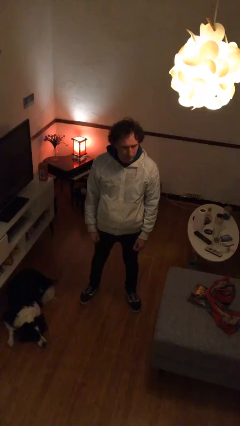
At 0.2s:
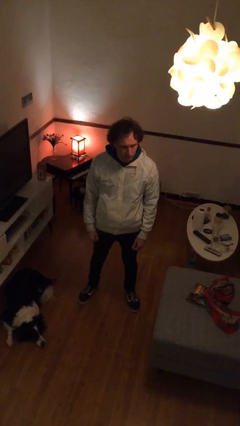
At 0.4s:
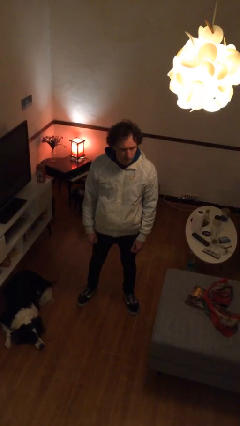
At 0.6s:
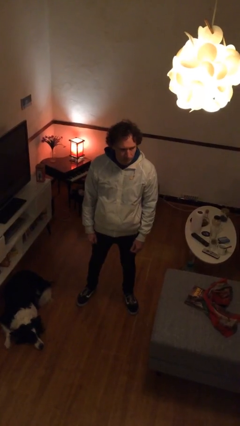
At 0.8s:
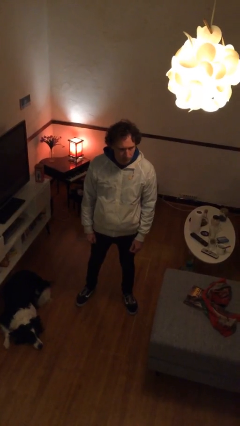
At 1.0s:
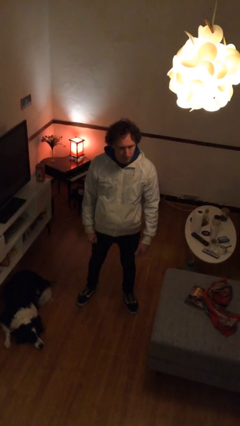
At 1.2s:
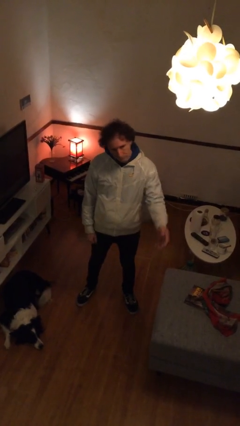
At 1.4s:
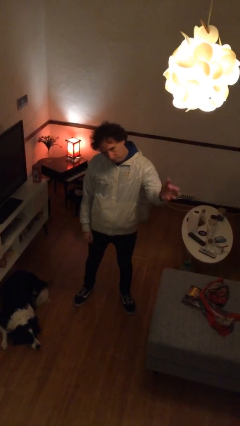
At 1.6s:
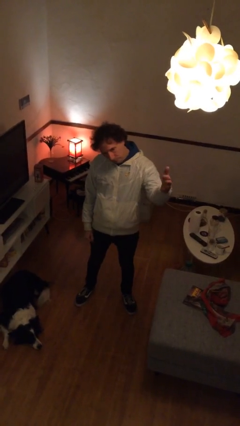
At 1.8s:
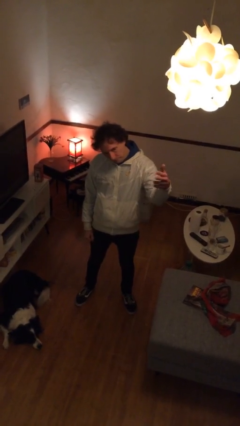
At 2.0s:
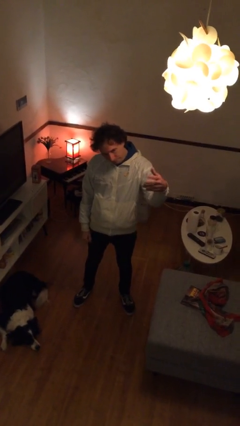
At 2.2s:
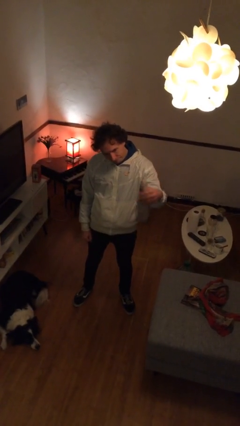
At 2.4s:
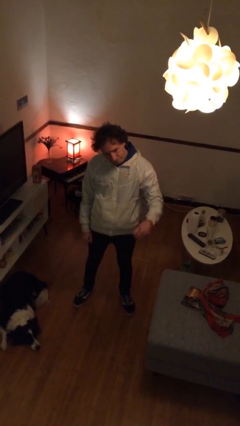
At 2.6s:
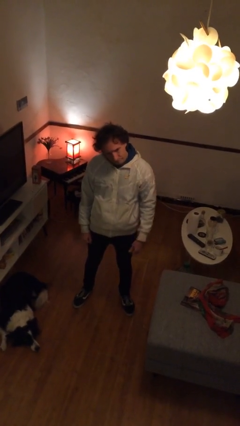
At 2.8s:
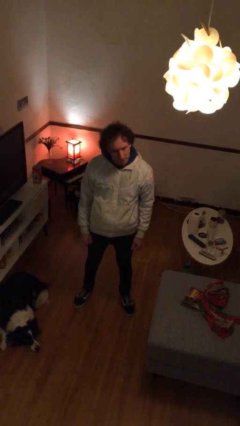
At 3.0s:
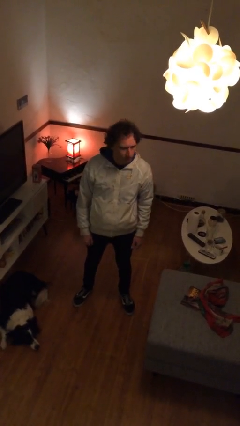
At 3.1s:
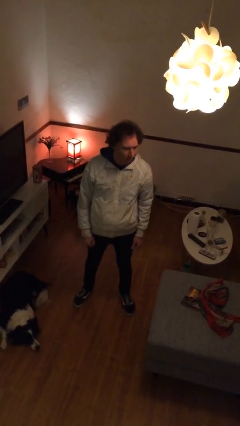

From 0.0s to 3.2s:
person gestures come here

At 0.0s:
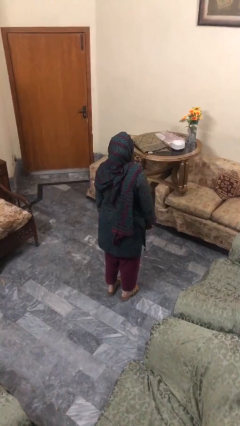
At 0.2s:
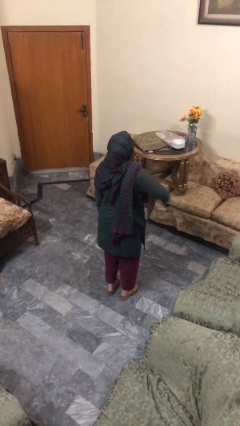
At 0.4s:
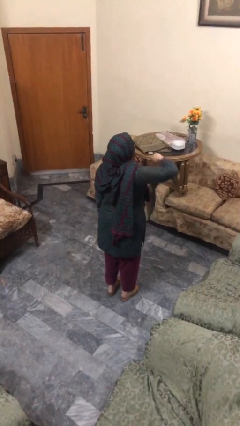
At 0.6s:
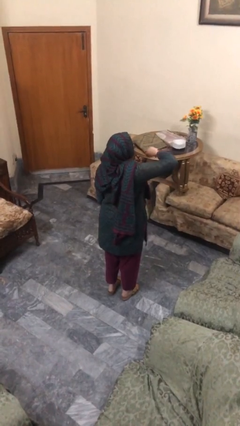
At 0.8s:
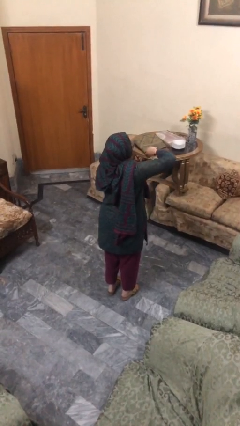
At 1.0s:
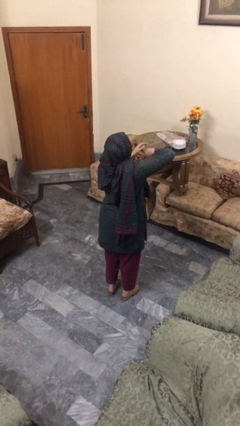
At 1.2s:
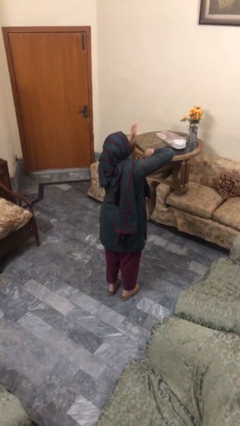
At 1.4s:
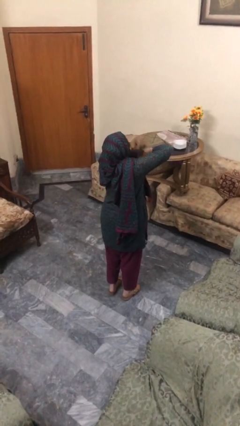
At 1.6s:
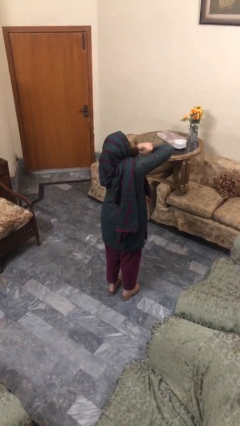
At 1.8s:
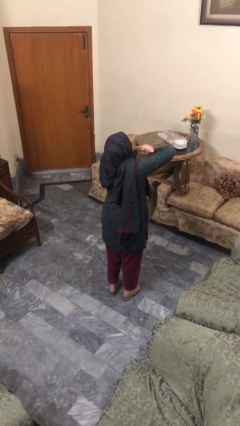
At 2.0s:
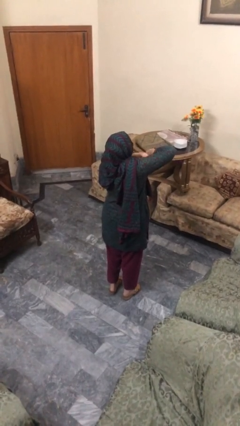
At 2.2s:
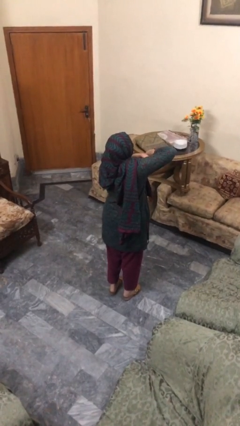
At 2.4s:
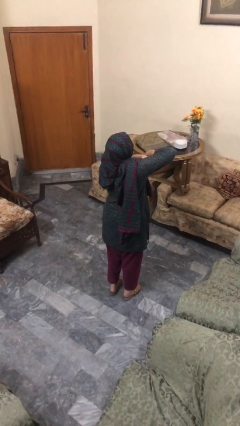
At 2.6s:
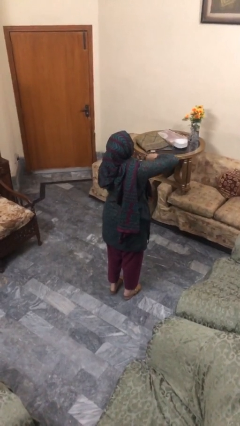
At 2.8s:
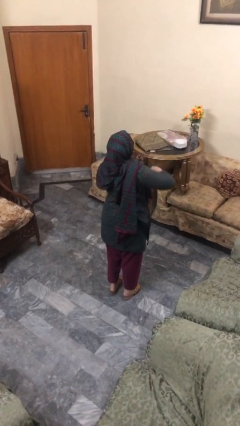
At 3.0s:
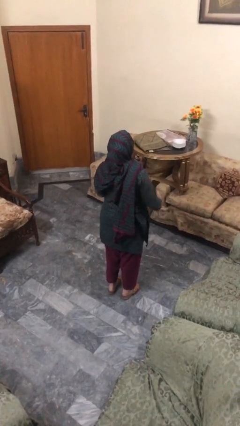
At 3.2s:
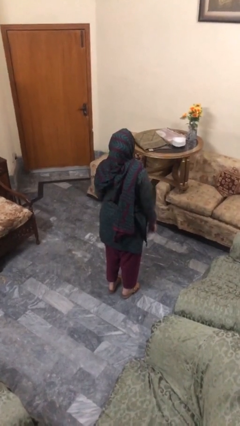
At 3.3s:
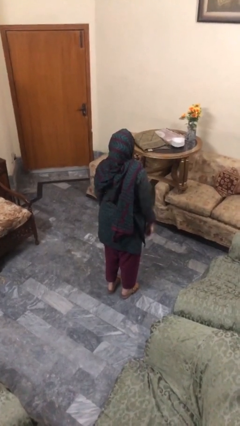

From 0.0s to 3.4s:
person swats bug

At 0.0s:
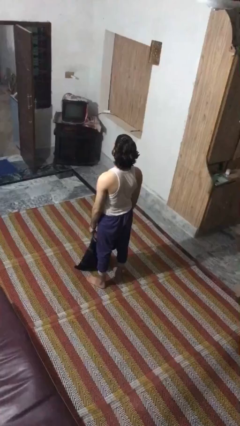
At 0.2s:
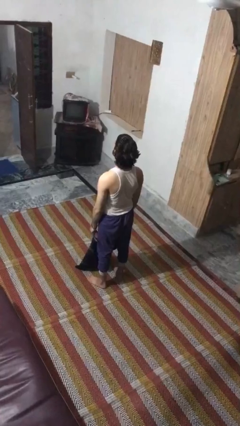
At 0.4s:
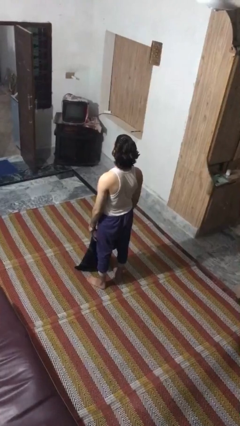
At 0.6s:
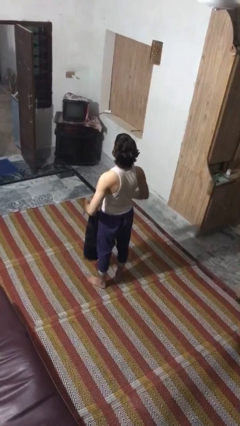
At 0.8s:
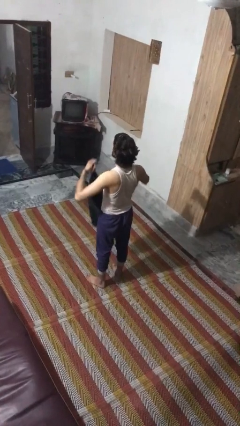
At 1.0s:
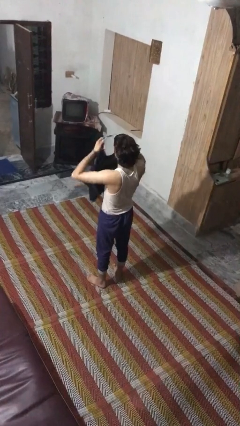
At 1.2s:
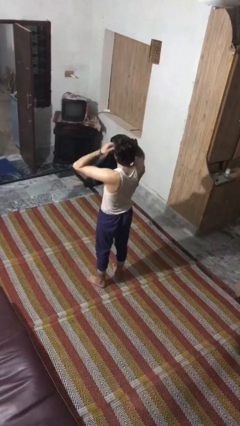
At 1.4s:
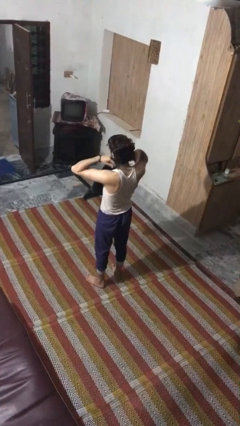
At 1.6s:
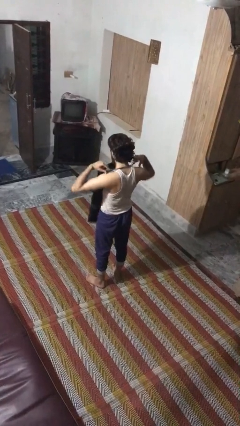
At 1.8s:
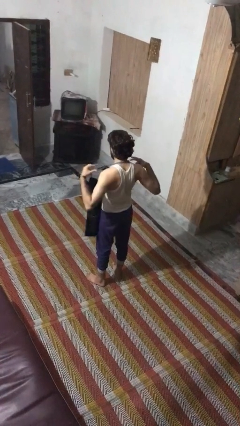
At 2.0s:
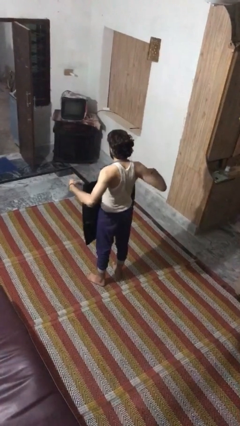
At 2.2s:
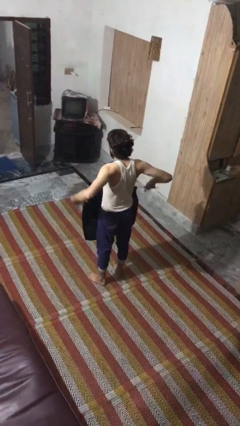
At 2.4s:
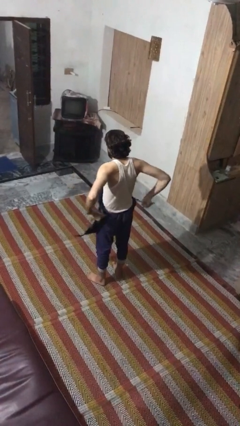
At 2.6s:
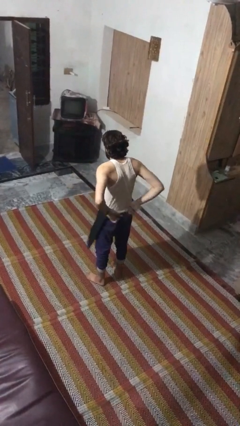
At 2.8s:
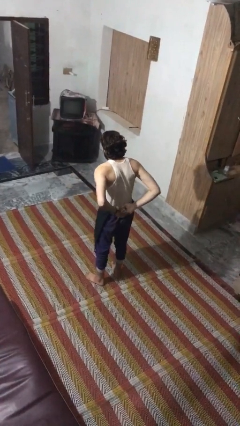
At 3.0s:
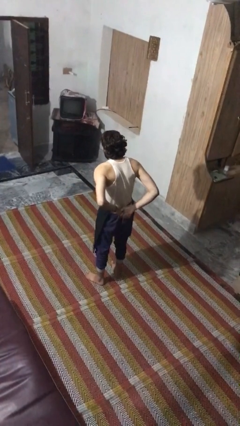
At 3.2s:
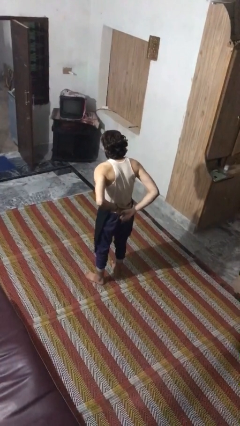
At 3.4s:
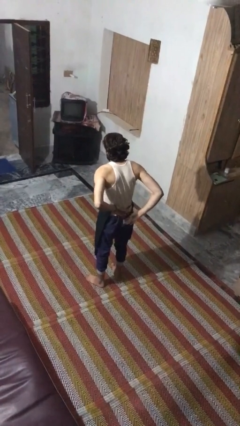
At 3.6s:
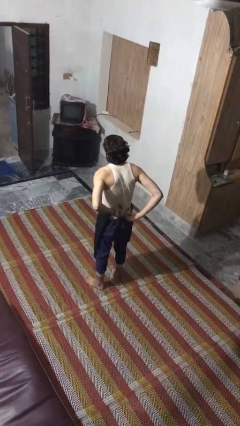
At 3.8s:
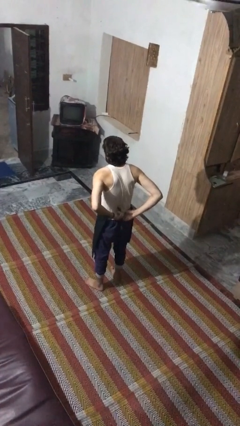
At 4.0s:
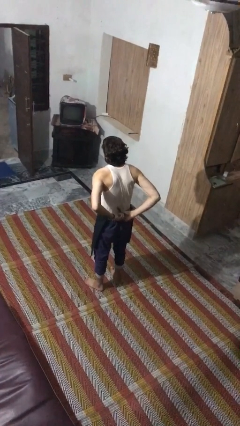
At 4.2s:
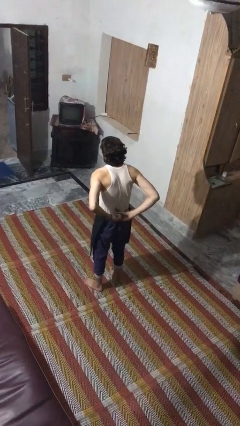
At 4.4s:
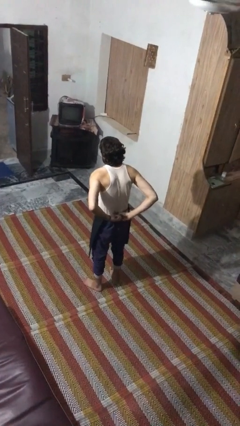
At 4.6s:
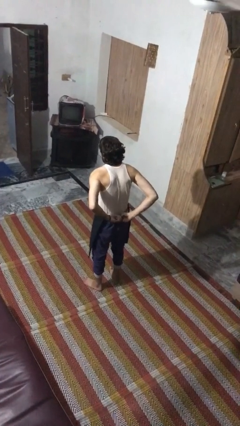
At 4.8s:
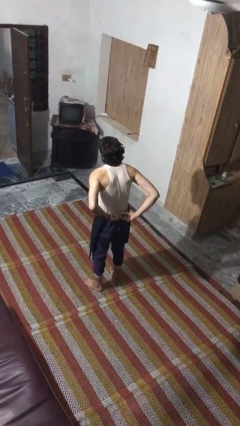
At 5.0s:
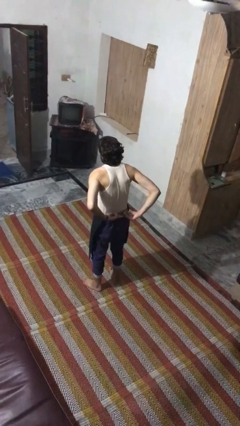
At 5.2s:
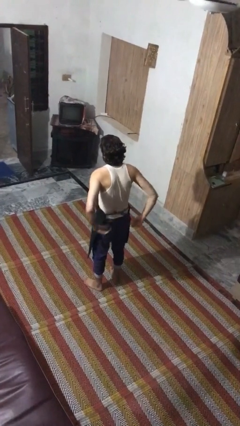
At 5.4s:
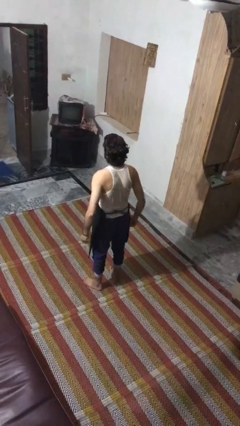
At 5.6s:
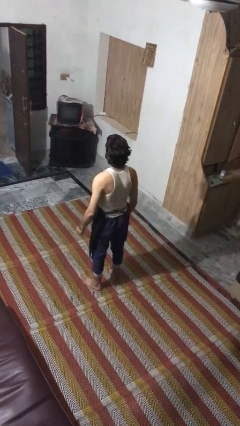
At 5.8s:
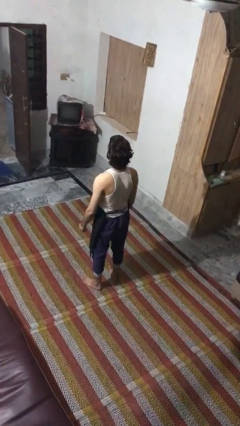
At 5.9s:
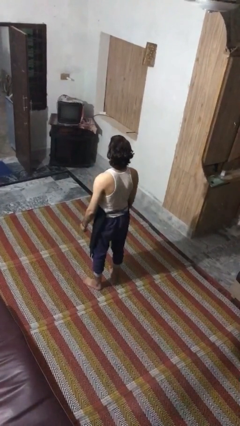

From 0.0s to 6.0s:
person puts on apron

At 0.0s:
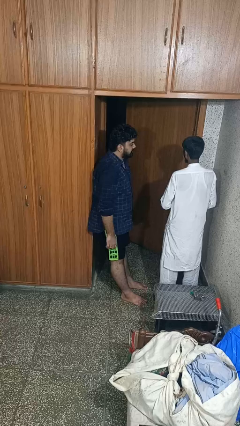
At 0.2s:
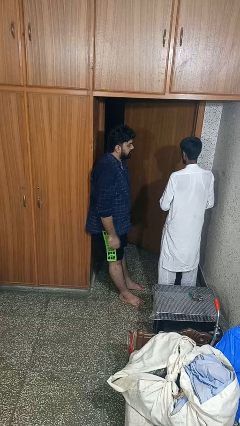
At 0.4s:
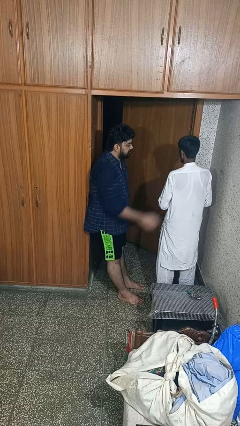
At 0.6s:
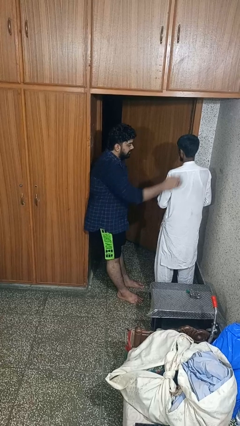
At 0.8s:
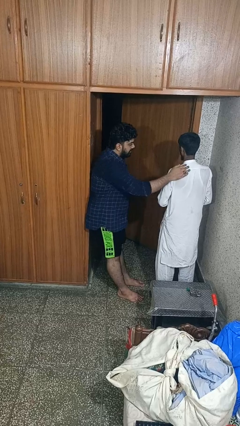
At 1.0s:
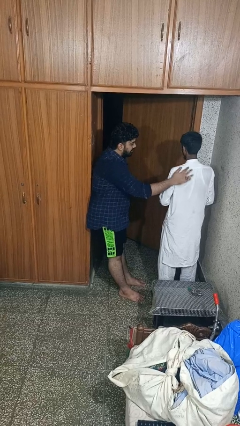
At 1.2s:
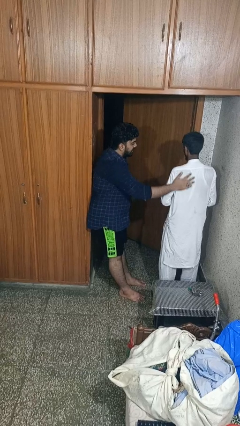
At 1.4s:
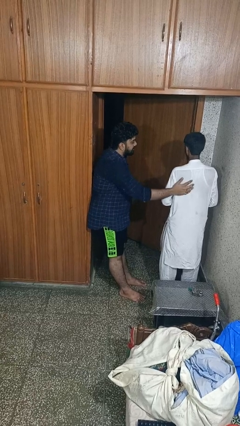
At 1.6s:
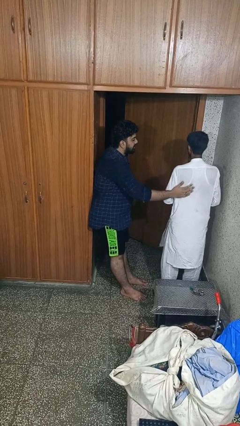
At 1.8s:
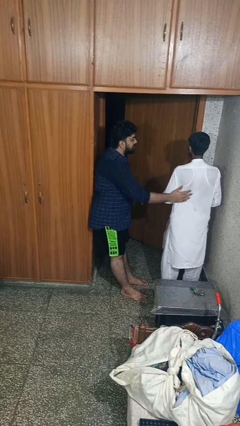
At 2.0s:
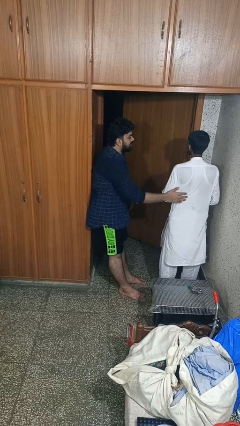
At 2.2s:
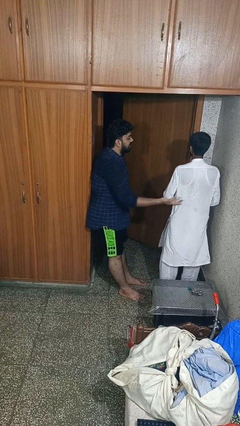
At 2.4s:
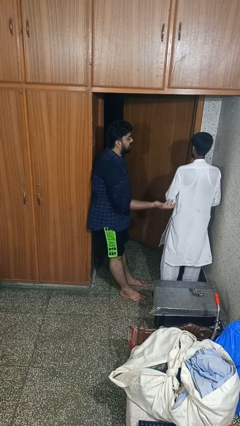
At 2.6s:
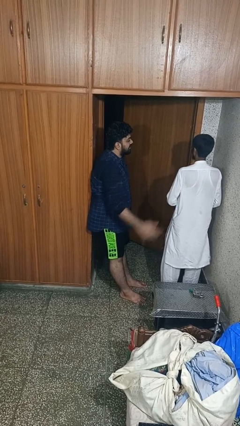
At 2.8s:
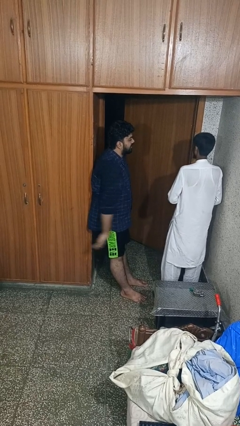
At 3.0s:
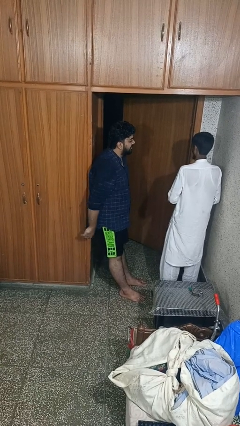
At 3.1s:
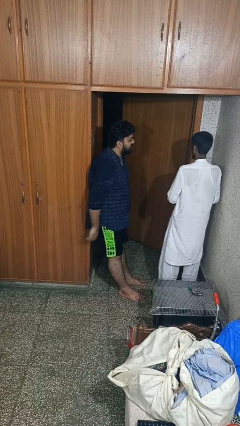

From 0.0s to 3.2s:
person touches back of person

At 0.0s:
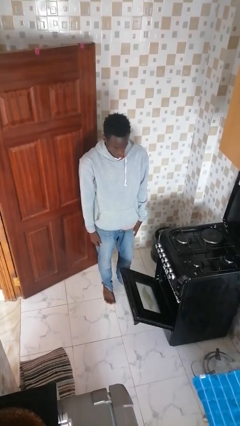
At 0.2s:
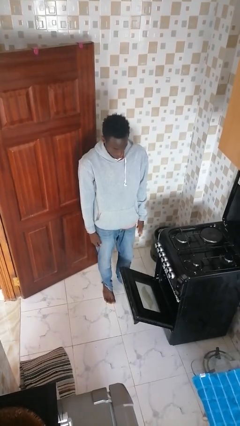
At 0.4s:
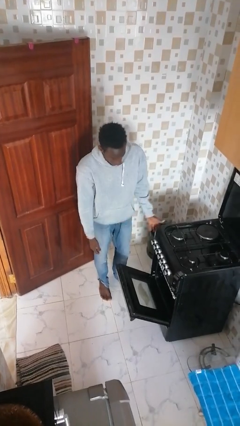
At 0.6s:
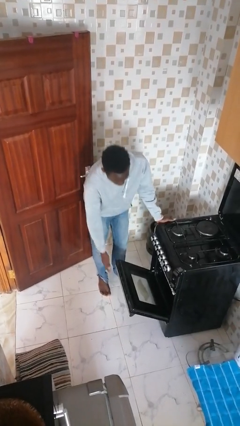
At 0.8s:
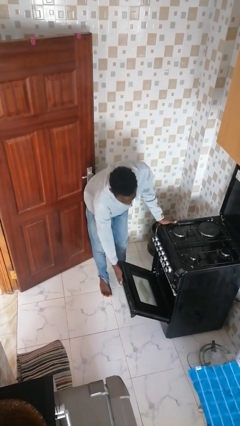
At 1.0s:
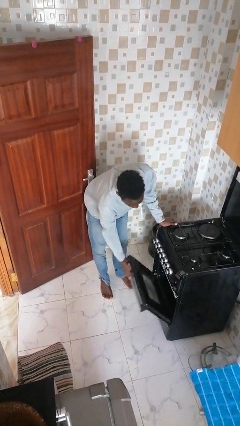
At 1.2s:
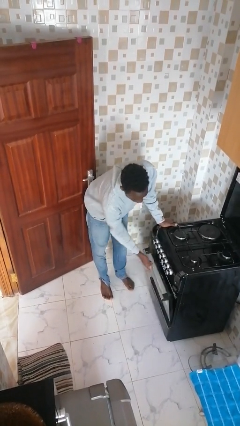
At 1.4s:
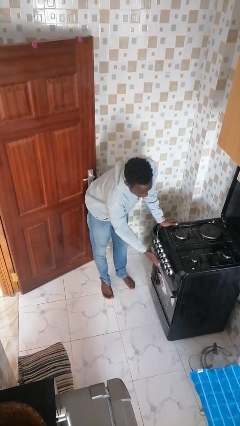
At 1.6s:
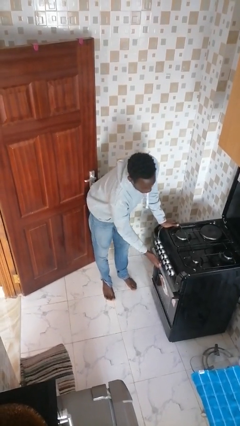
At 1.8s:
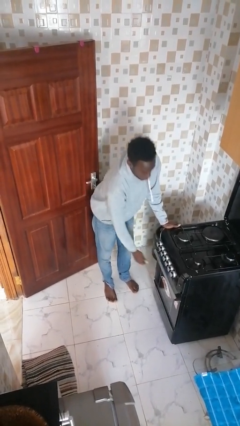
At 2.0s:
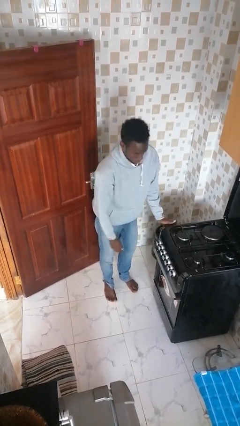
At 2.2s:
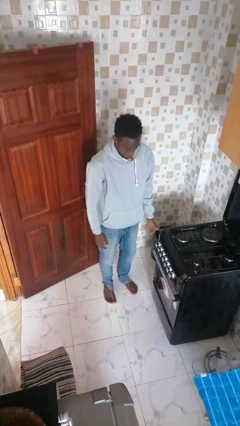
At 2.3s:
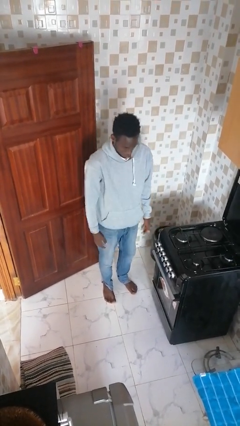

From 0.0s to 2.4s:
person closes oven door
